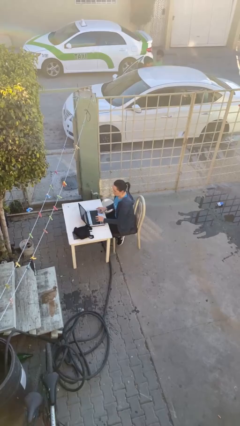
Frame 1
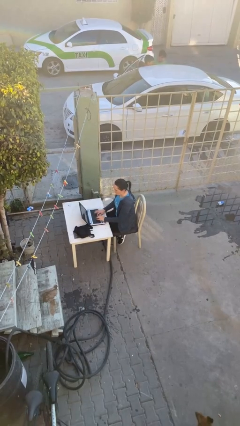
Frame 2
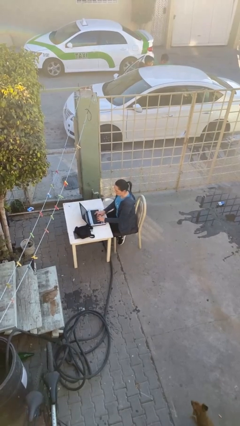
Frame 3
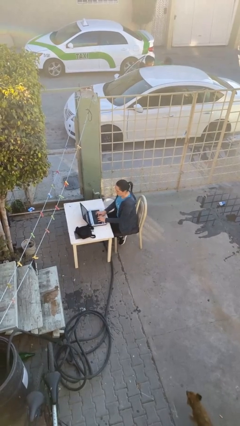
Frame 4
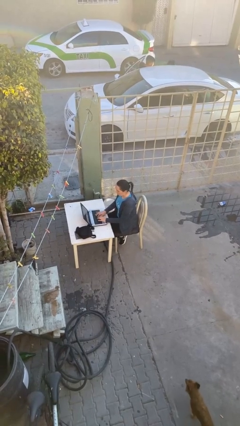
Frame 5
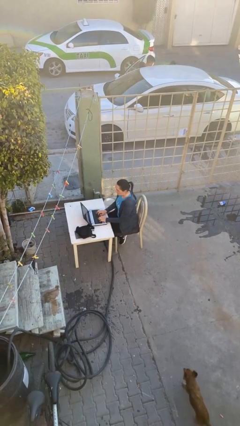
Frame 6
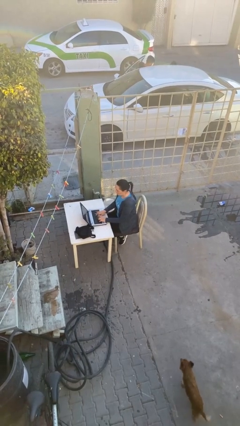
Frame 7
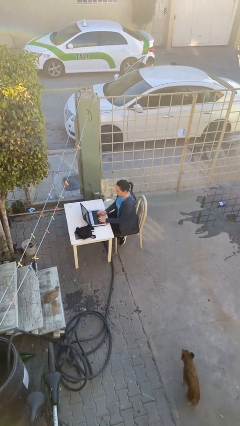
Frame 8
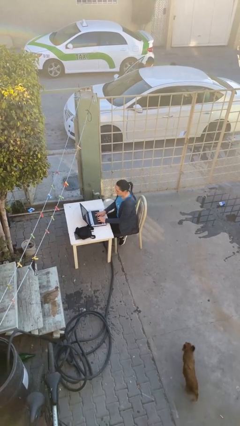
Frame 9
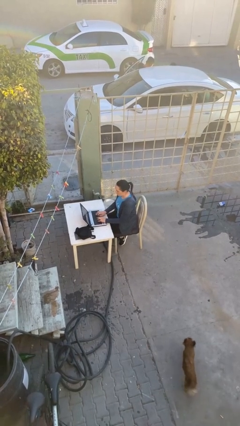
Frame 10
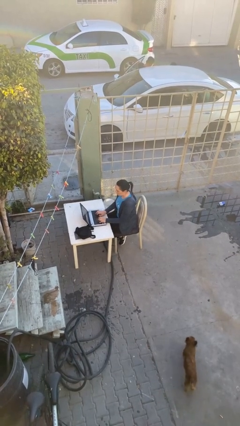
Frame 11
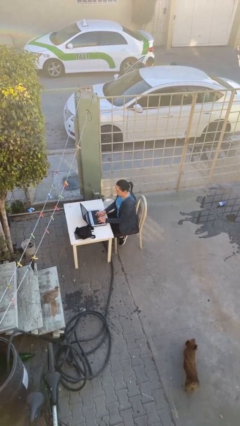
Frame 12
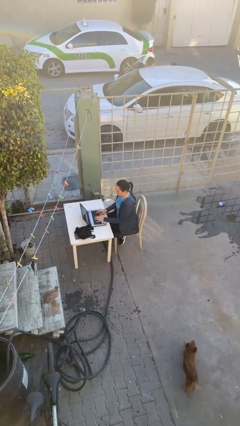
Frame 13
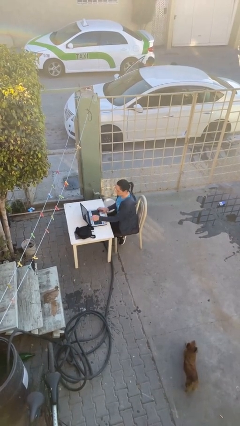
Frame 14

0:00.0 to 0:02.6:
person interacts with laptop

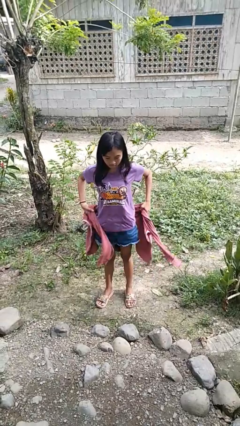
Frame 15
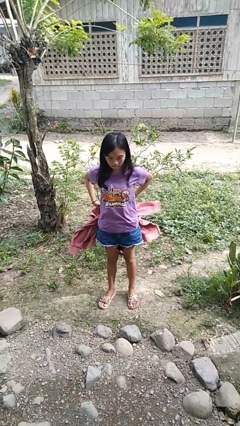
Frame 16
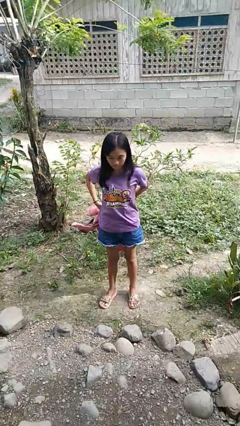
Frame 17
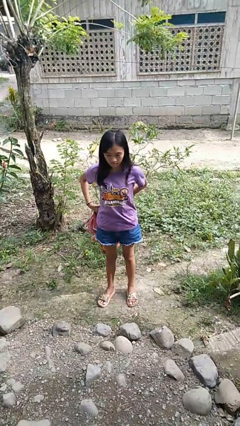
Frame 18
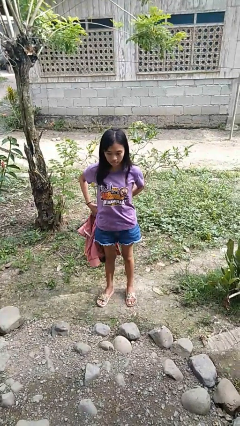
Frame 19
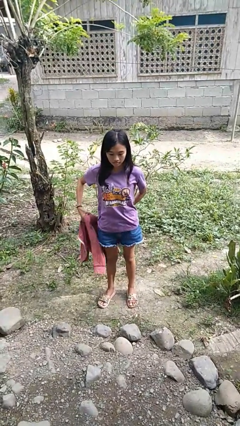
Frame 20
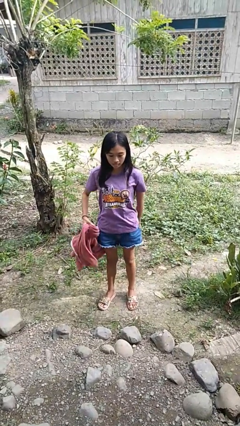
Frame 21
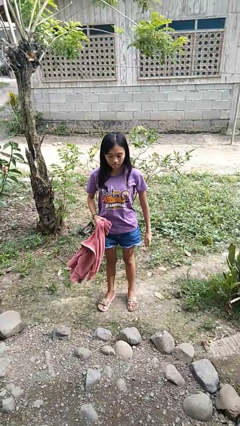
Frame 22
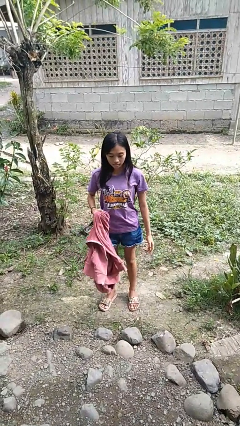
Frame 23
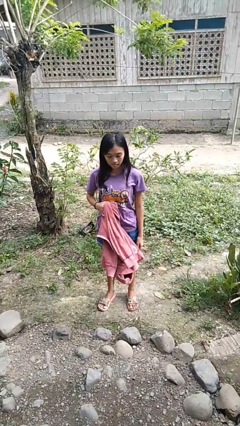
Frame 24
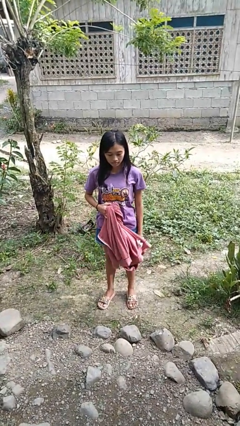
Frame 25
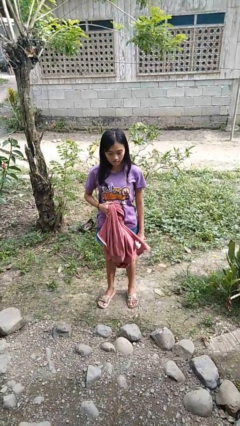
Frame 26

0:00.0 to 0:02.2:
person unties jacket around waist

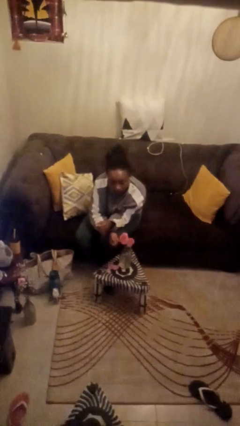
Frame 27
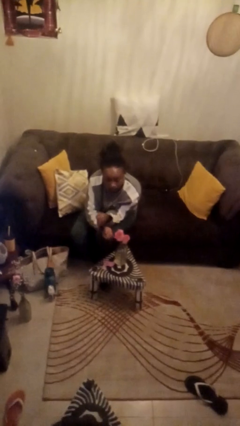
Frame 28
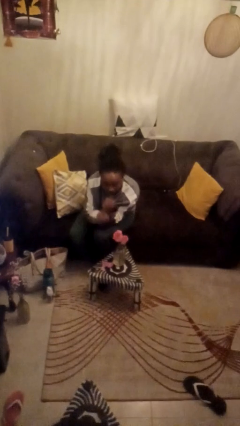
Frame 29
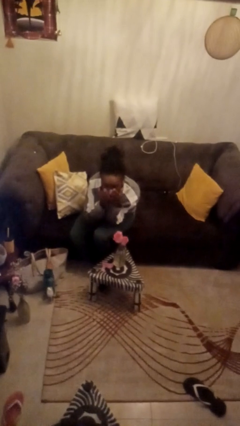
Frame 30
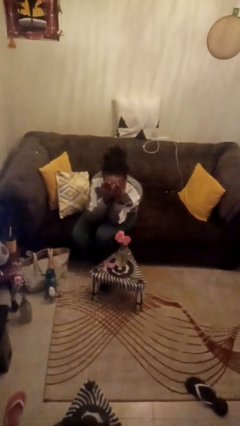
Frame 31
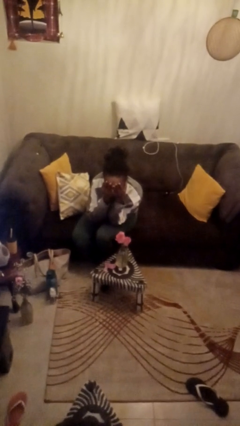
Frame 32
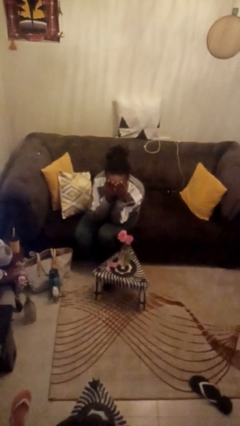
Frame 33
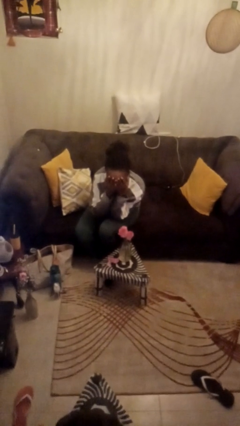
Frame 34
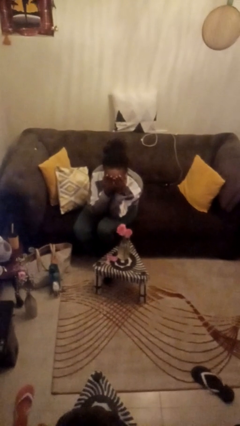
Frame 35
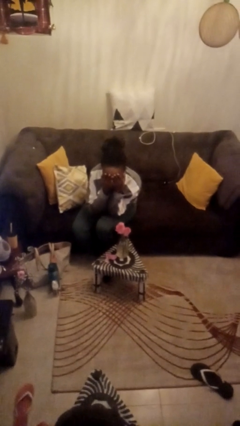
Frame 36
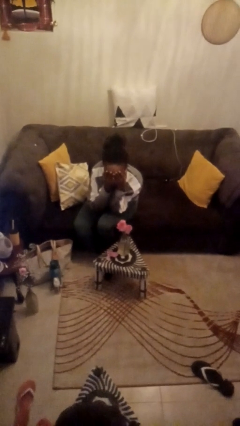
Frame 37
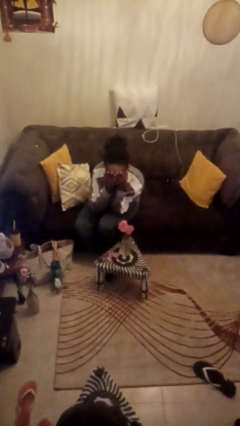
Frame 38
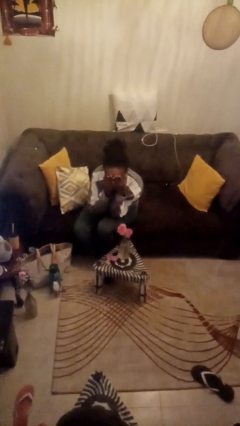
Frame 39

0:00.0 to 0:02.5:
person covers face with hands

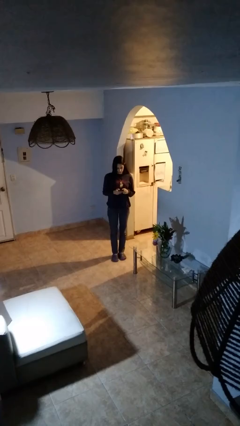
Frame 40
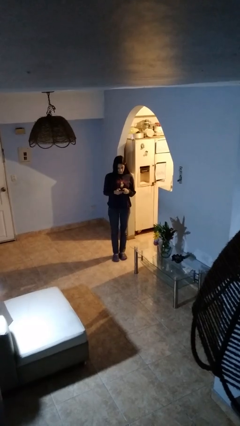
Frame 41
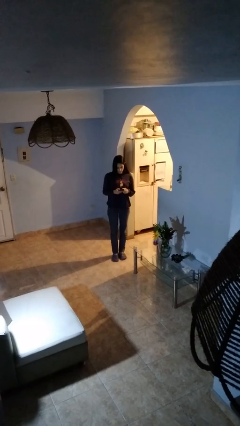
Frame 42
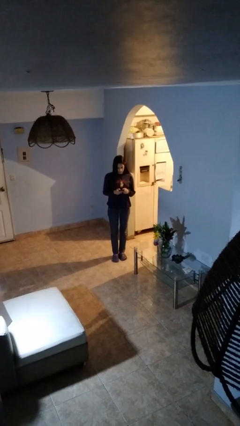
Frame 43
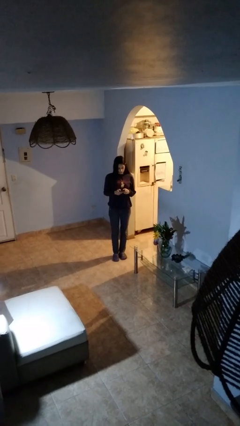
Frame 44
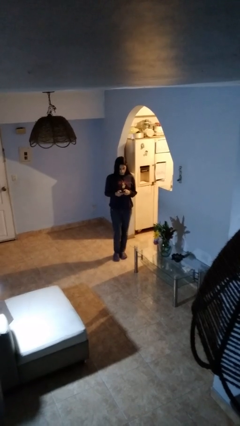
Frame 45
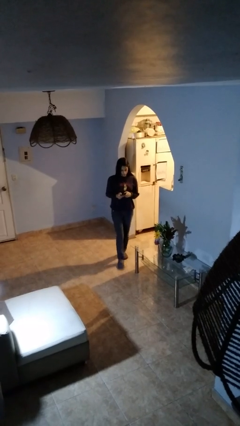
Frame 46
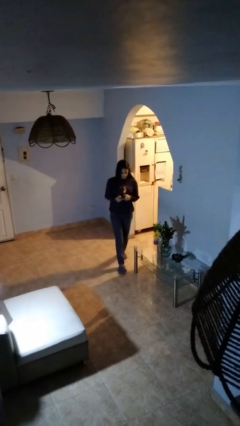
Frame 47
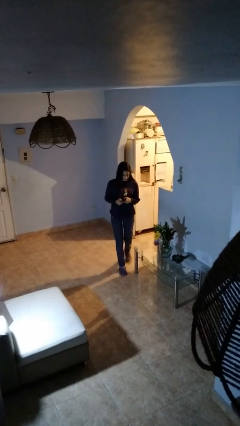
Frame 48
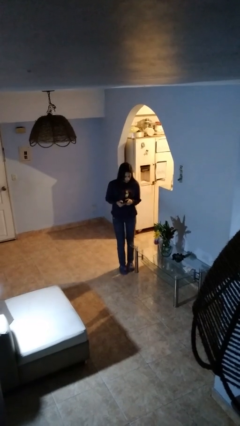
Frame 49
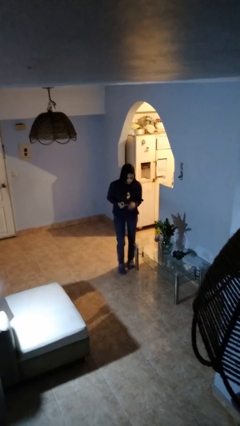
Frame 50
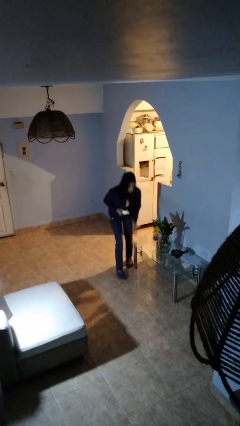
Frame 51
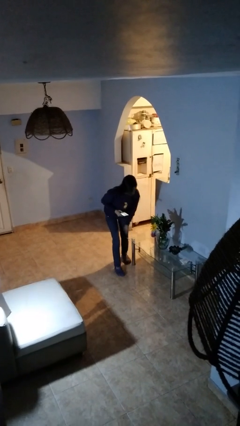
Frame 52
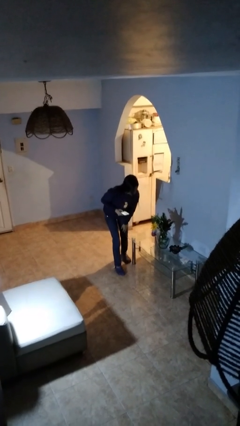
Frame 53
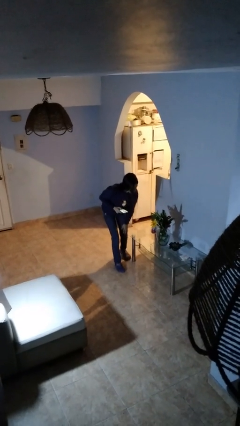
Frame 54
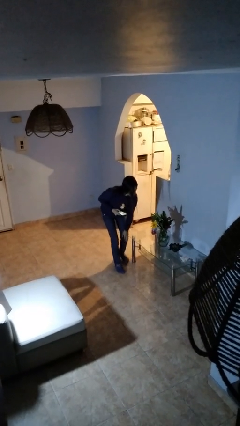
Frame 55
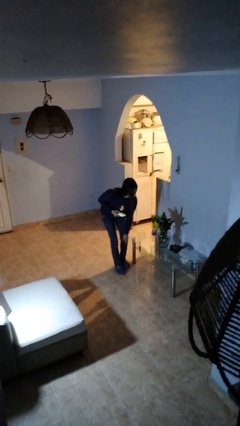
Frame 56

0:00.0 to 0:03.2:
person bumps into table

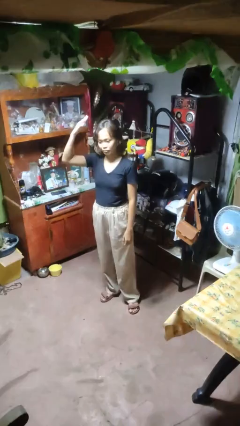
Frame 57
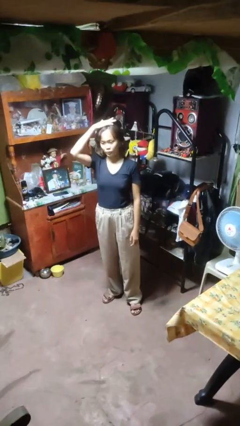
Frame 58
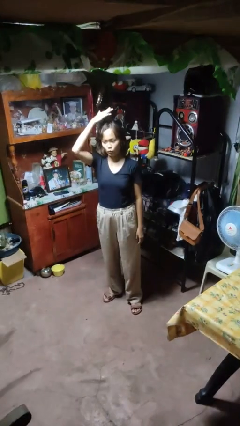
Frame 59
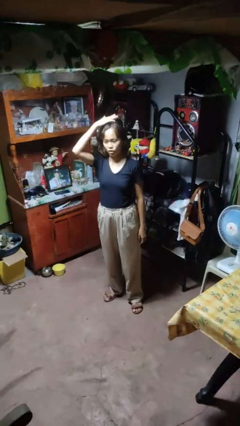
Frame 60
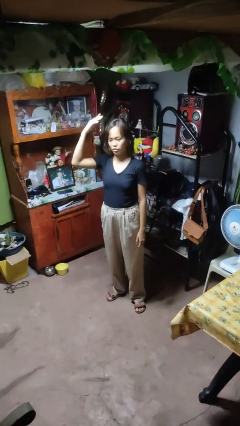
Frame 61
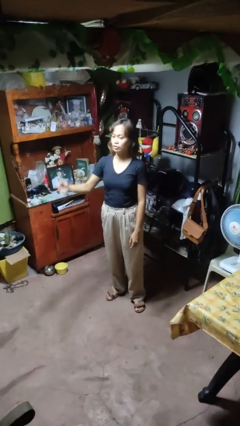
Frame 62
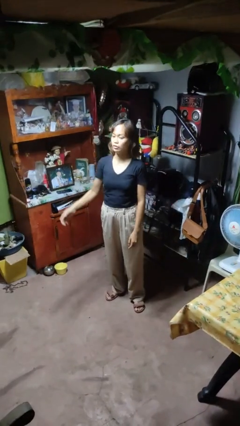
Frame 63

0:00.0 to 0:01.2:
person pats head

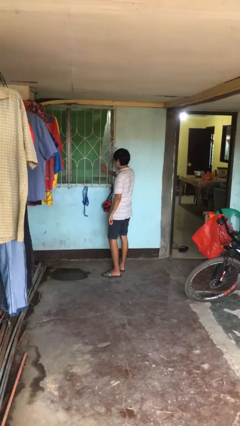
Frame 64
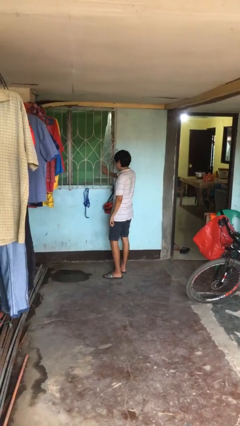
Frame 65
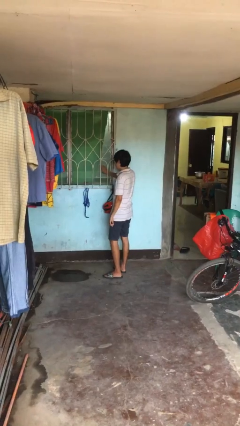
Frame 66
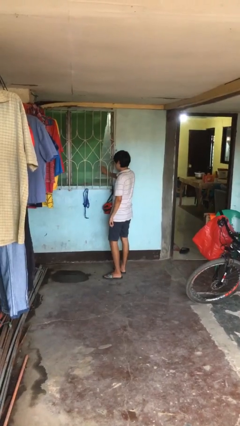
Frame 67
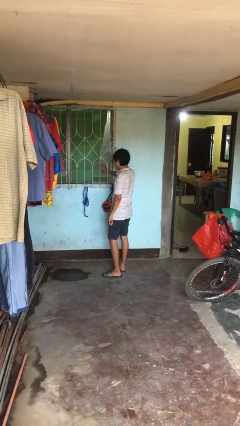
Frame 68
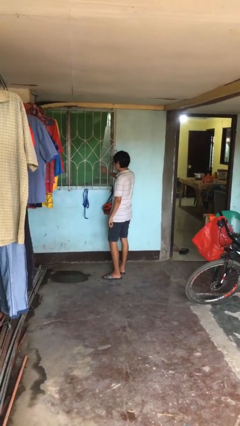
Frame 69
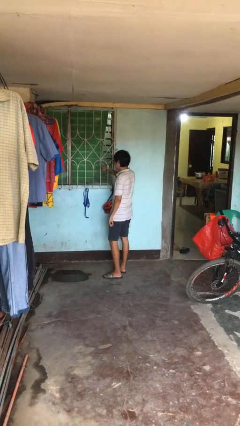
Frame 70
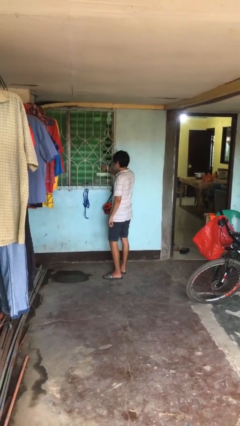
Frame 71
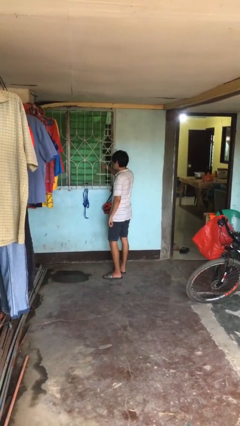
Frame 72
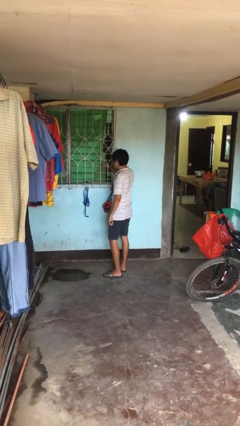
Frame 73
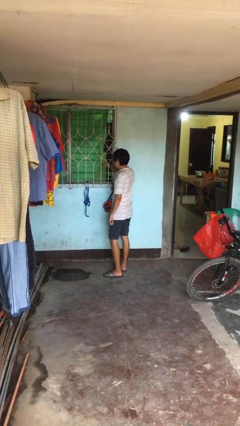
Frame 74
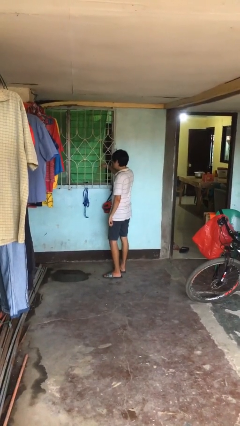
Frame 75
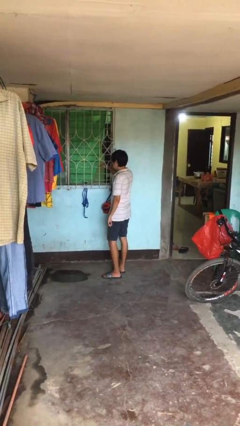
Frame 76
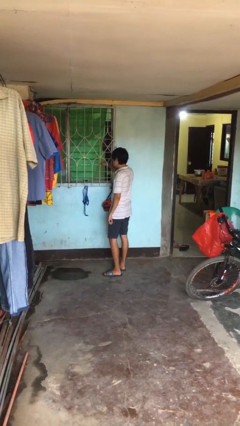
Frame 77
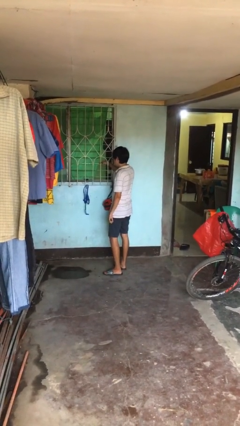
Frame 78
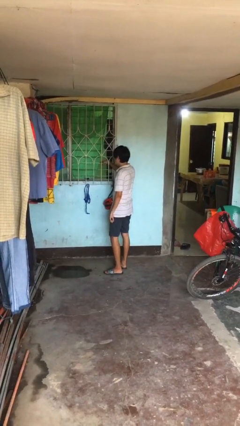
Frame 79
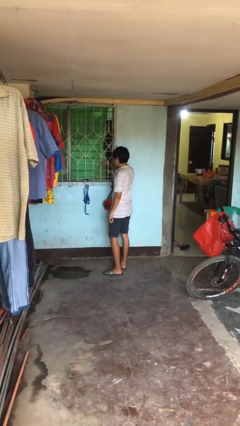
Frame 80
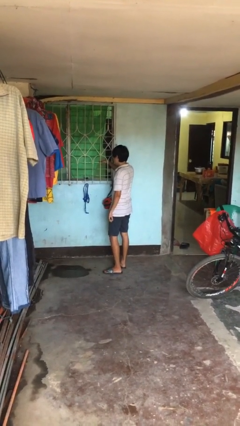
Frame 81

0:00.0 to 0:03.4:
person opens home window

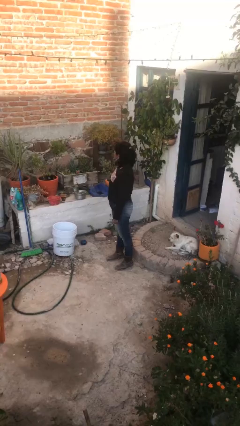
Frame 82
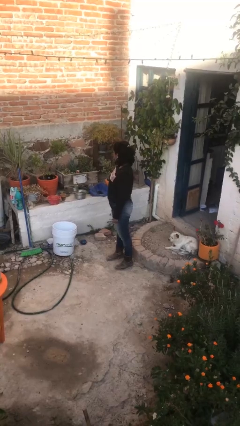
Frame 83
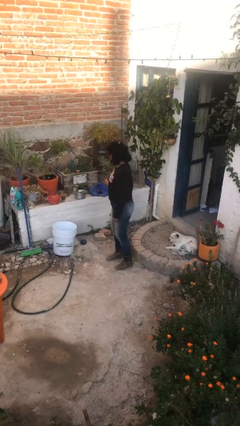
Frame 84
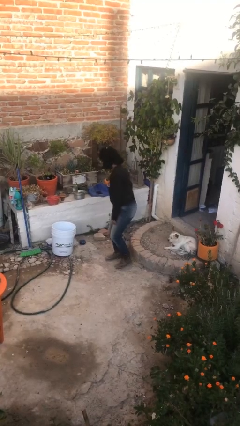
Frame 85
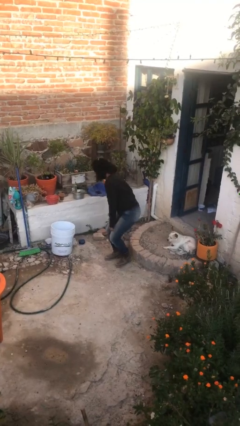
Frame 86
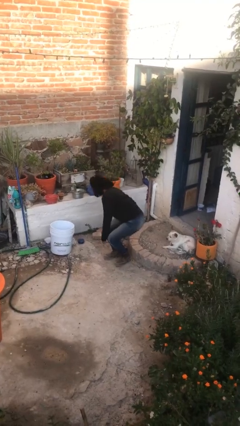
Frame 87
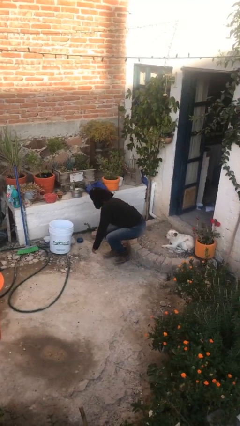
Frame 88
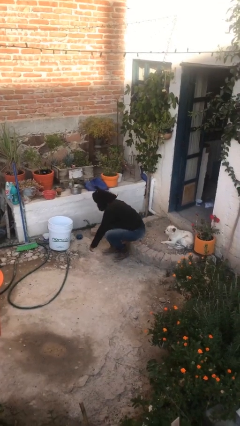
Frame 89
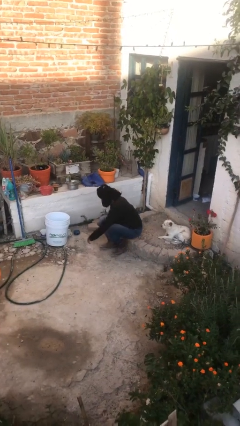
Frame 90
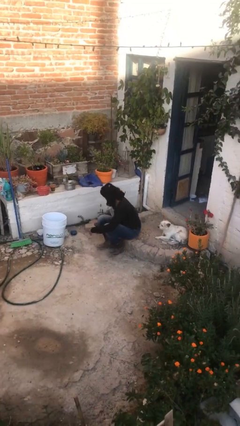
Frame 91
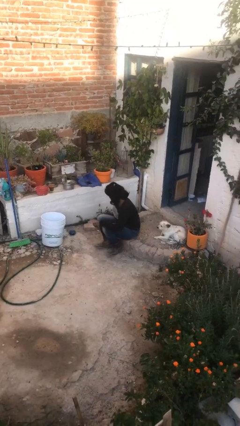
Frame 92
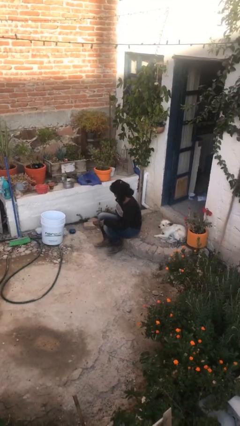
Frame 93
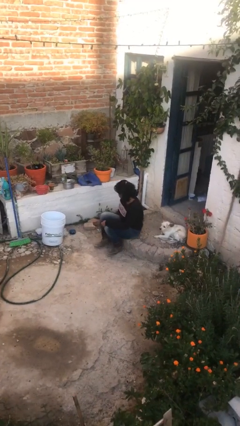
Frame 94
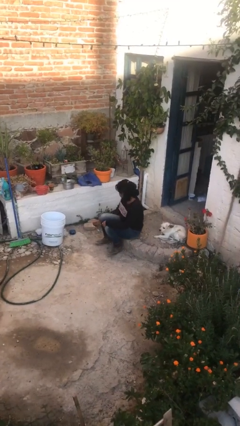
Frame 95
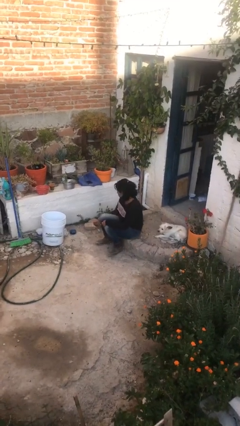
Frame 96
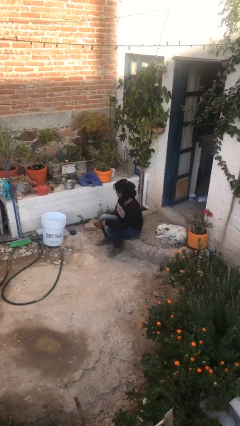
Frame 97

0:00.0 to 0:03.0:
person sits down
